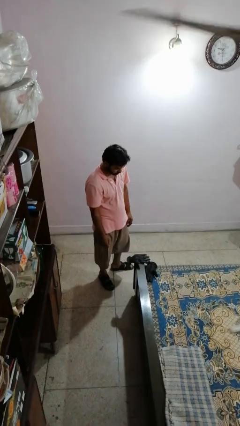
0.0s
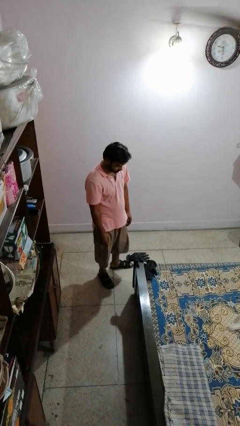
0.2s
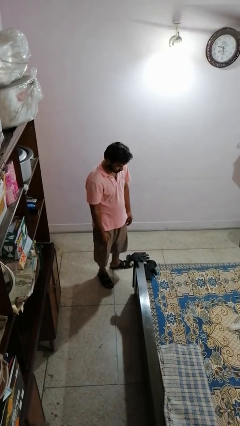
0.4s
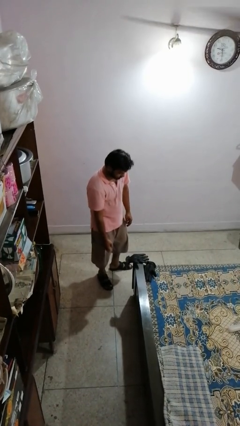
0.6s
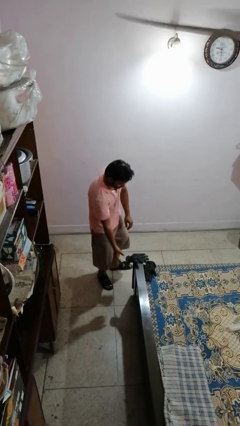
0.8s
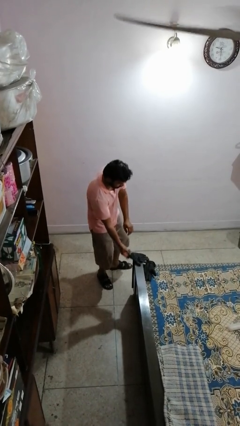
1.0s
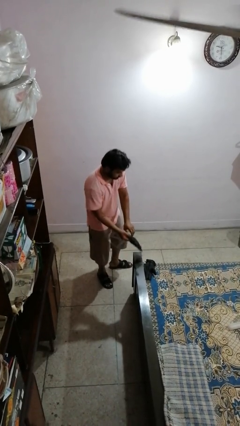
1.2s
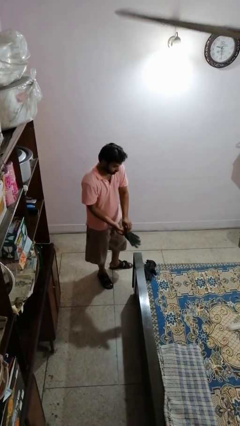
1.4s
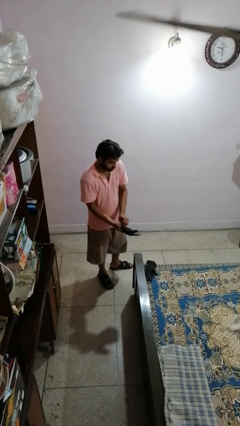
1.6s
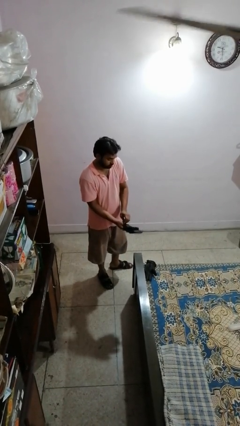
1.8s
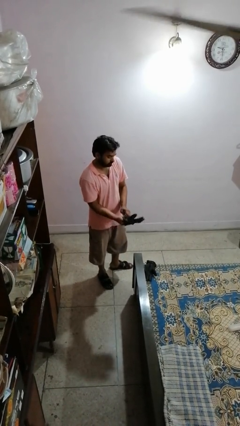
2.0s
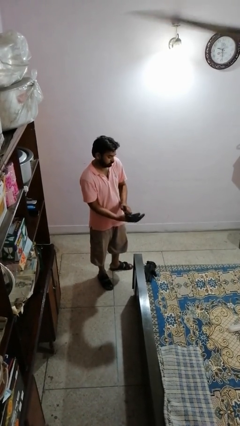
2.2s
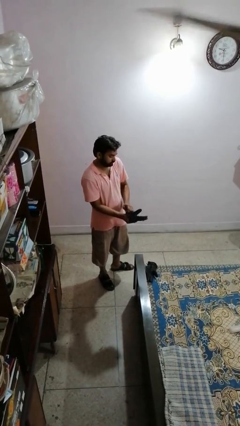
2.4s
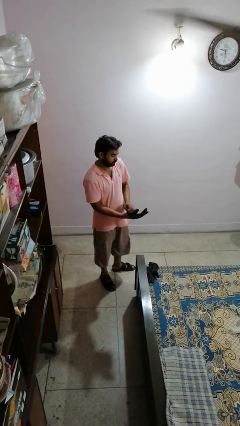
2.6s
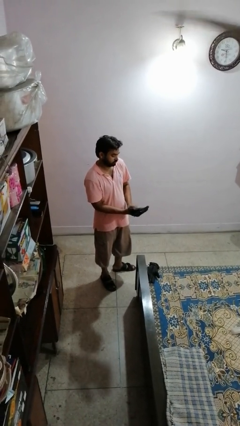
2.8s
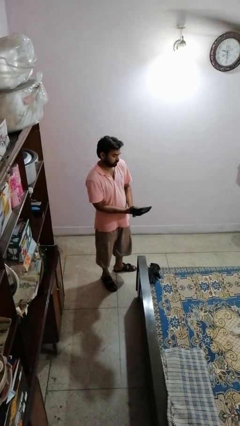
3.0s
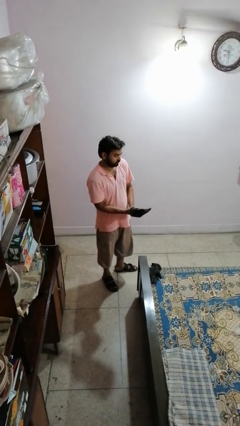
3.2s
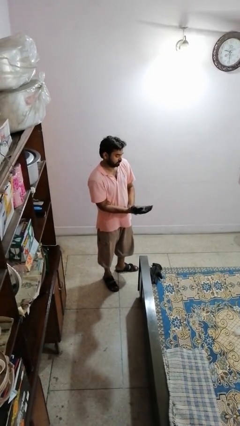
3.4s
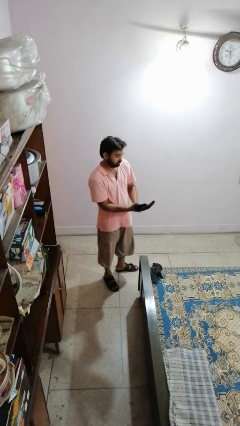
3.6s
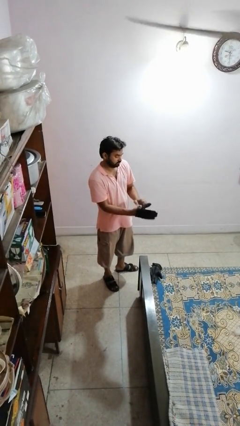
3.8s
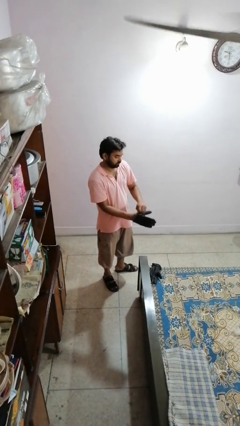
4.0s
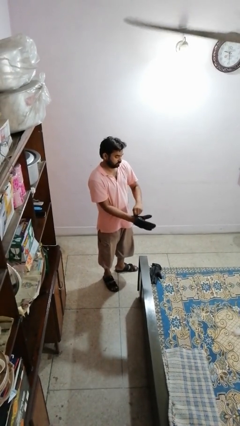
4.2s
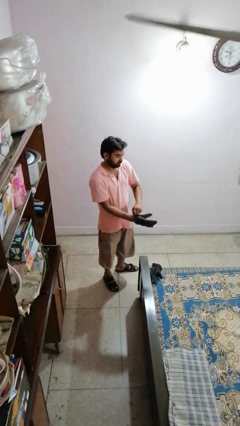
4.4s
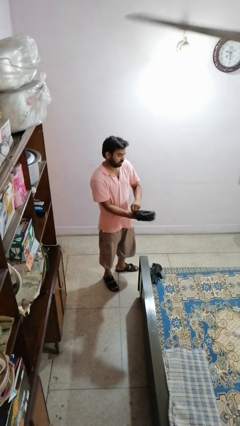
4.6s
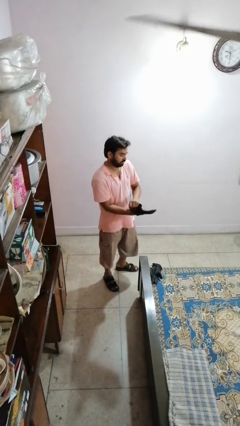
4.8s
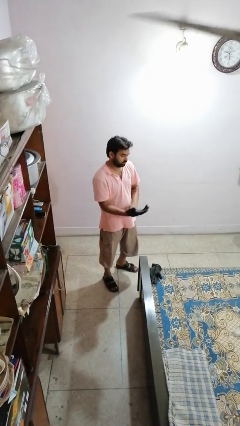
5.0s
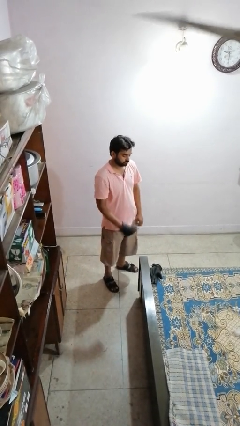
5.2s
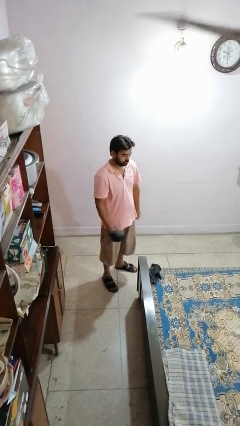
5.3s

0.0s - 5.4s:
person puts on gloves

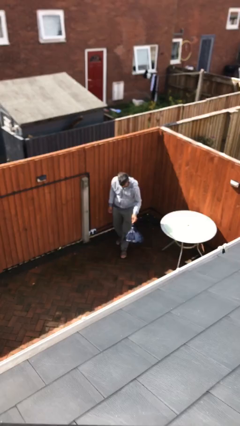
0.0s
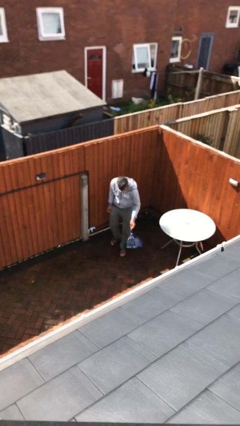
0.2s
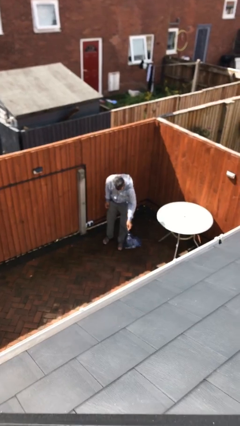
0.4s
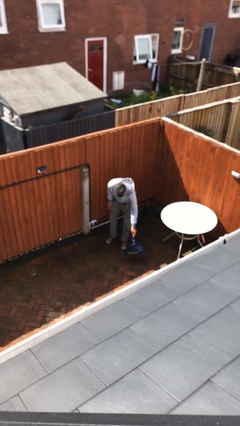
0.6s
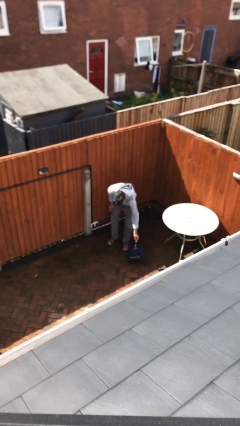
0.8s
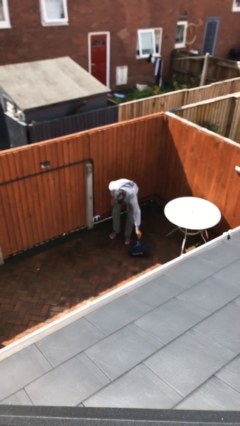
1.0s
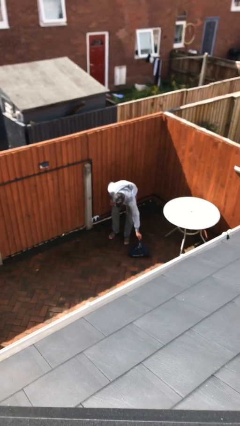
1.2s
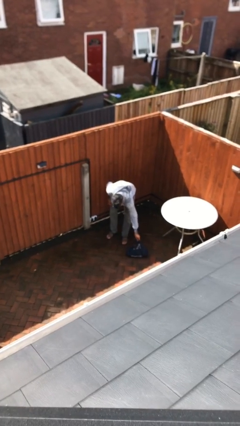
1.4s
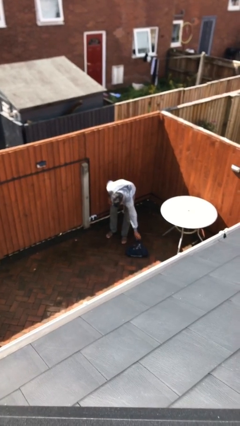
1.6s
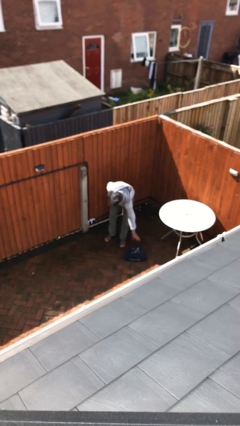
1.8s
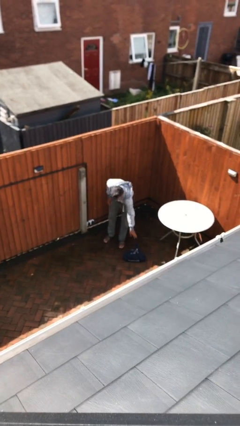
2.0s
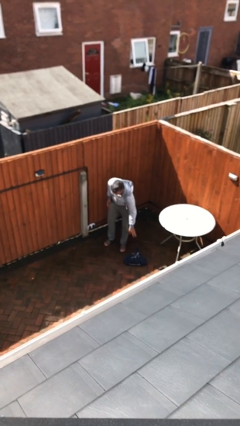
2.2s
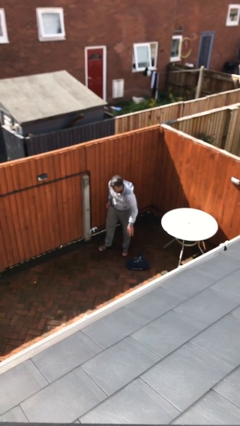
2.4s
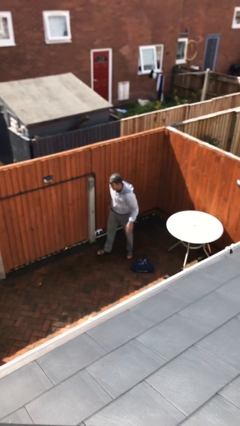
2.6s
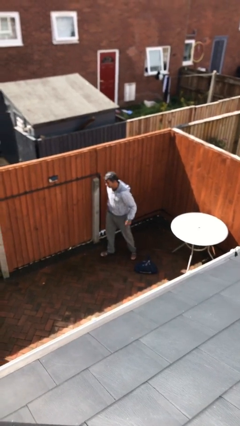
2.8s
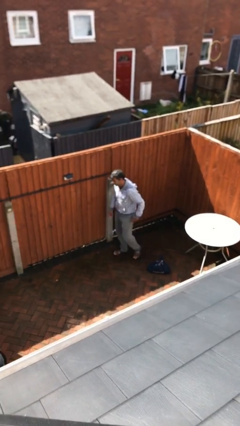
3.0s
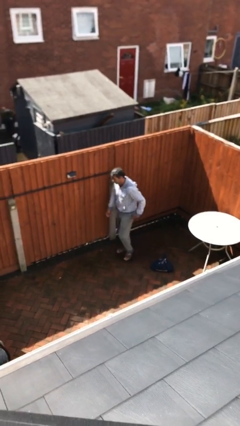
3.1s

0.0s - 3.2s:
person puts down object on floor

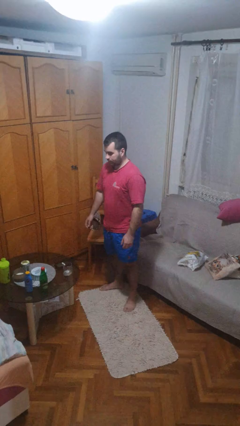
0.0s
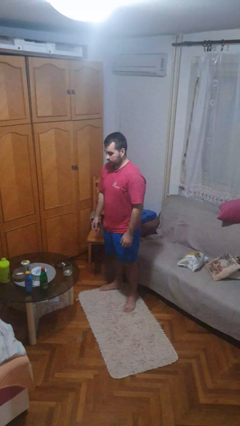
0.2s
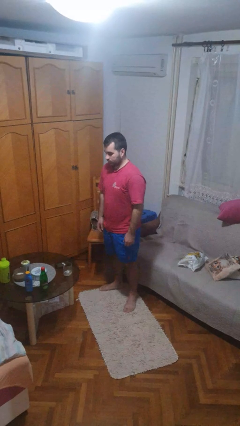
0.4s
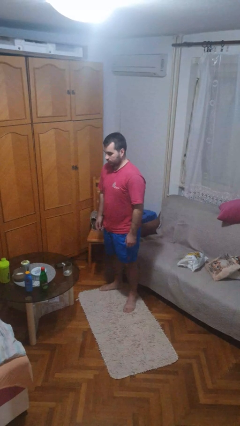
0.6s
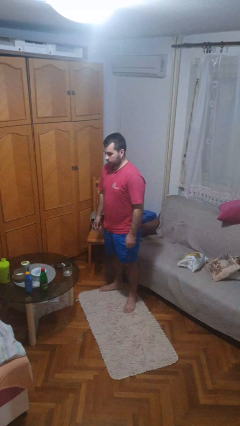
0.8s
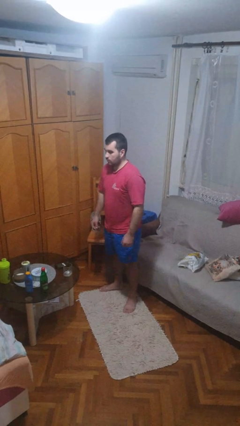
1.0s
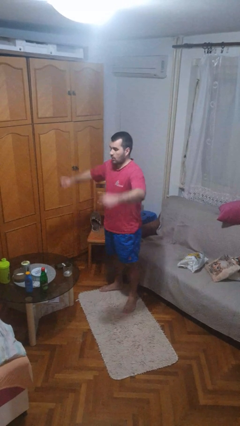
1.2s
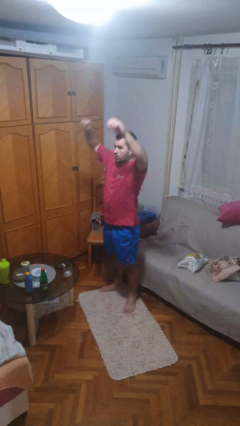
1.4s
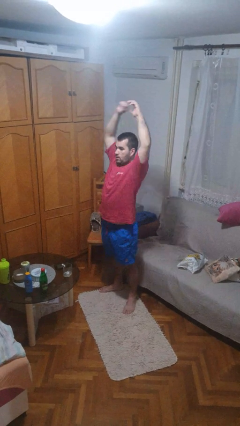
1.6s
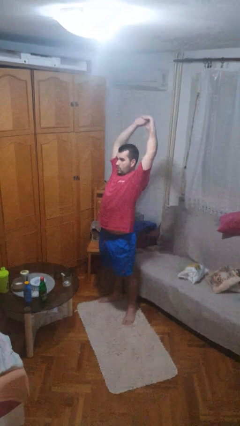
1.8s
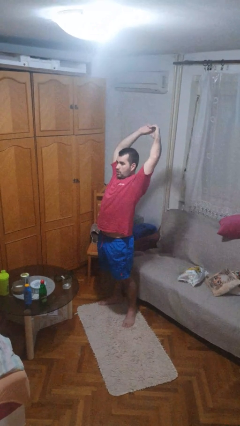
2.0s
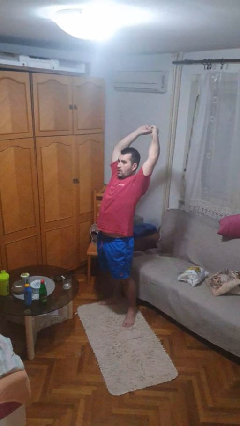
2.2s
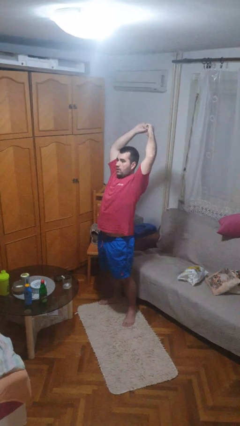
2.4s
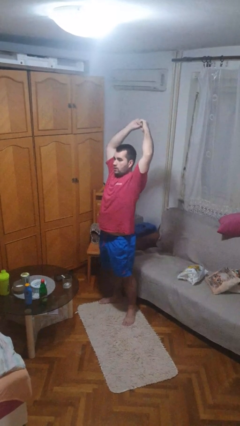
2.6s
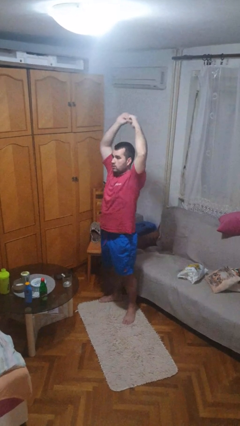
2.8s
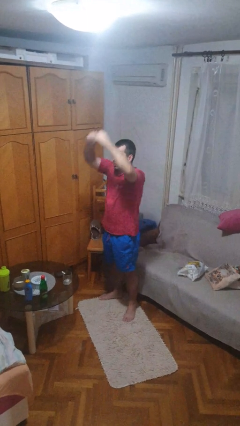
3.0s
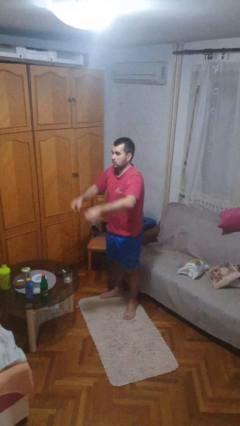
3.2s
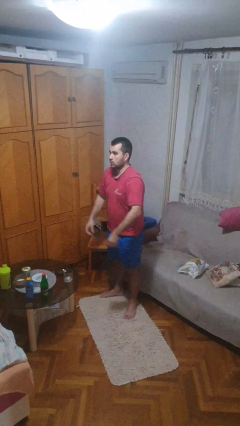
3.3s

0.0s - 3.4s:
person stretches arms over head

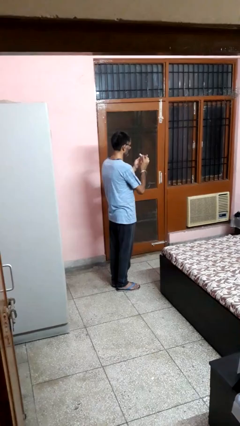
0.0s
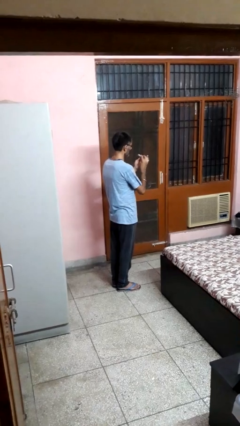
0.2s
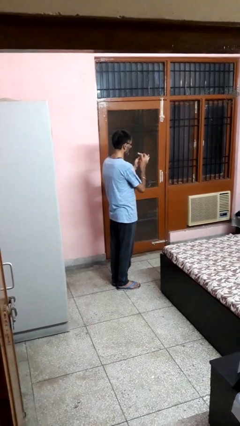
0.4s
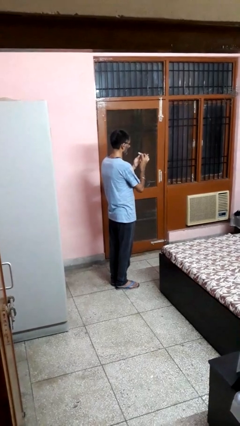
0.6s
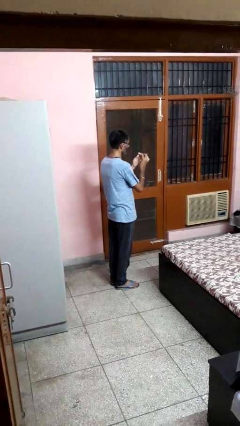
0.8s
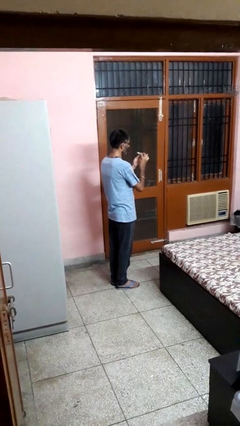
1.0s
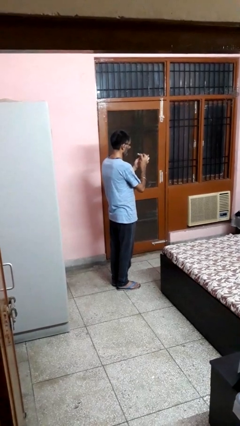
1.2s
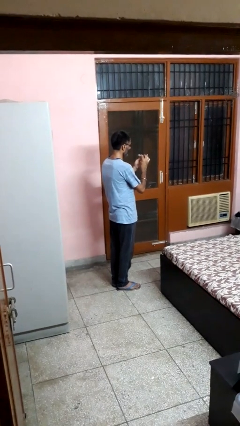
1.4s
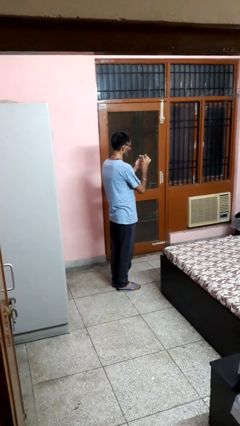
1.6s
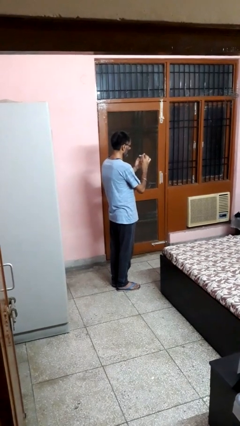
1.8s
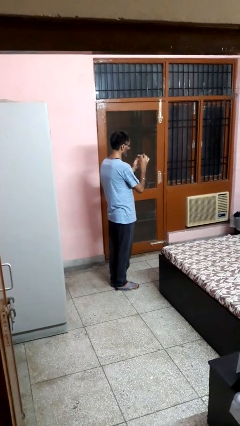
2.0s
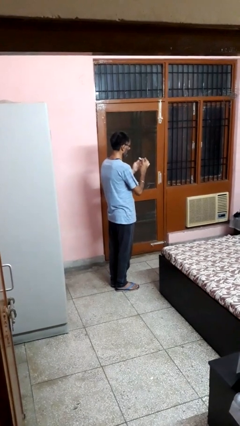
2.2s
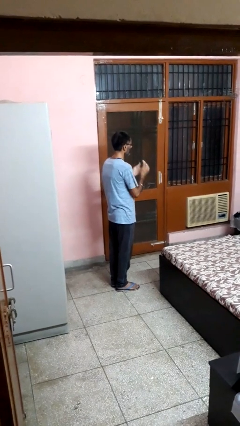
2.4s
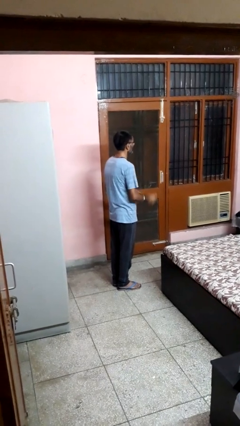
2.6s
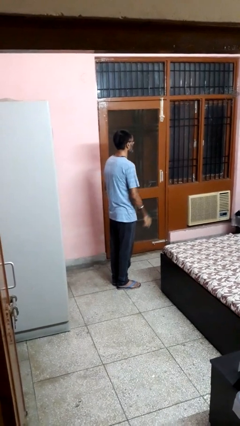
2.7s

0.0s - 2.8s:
person files fingernails

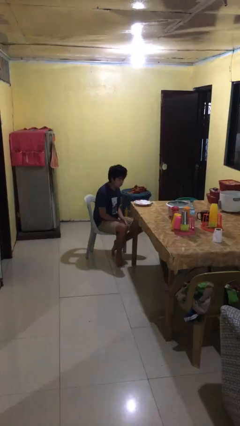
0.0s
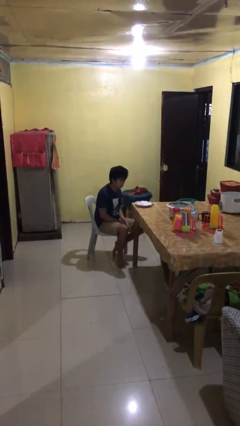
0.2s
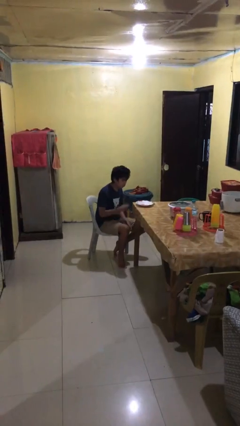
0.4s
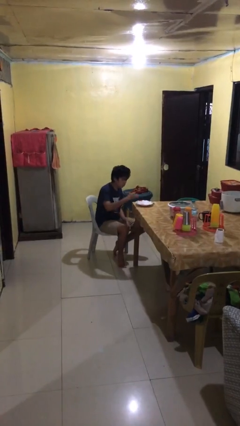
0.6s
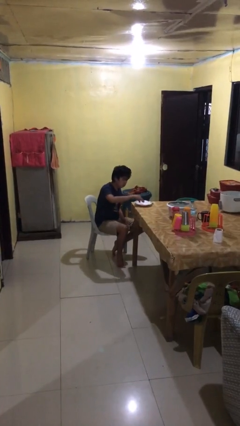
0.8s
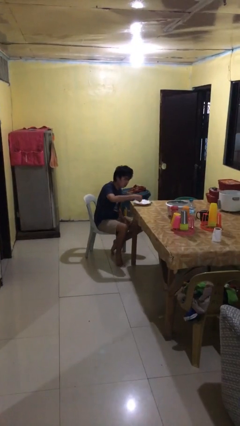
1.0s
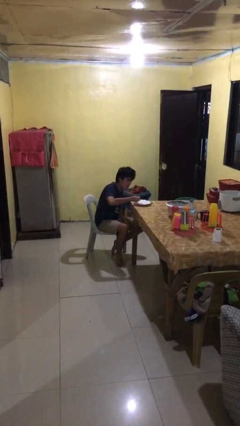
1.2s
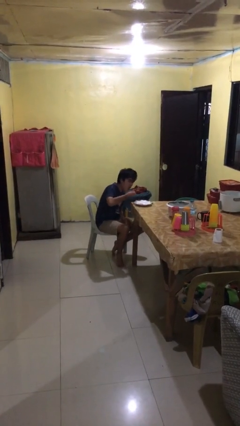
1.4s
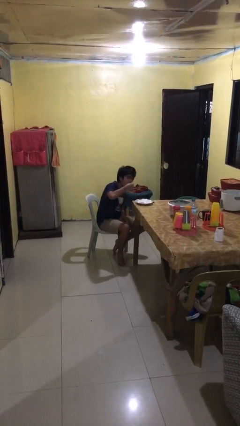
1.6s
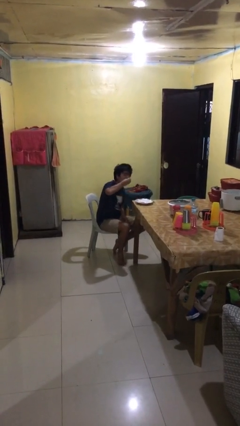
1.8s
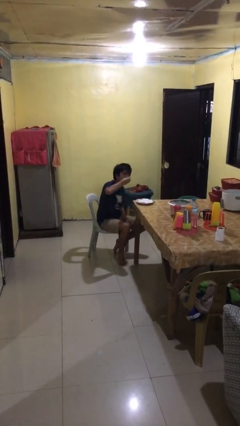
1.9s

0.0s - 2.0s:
person eats with hands

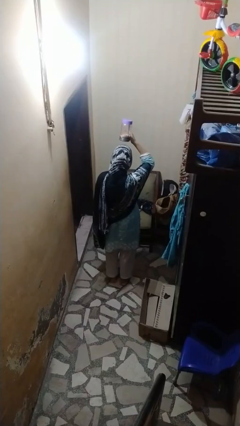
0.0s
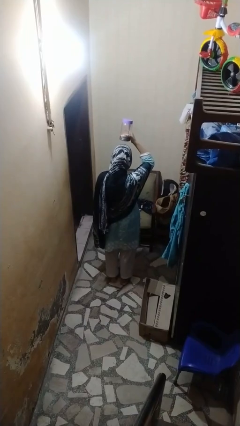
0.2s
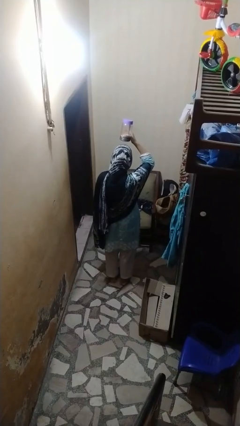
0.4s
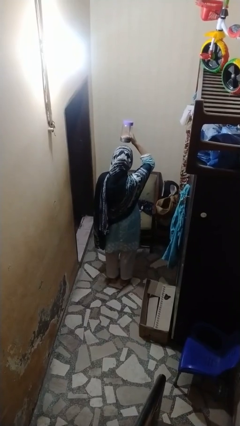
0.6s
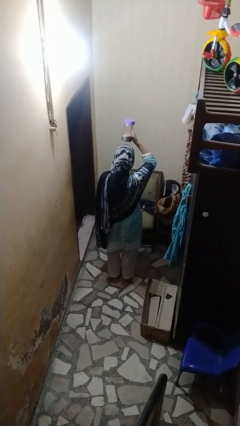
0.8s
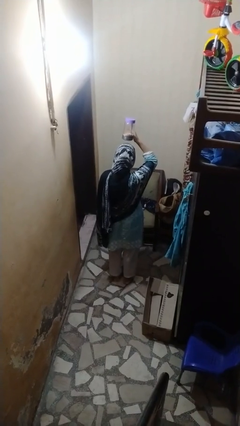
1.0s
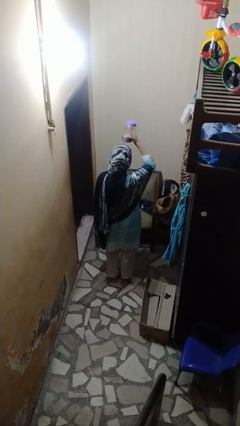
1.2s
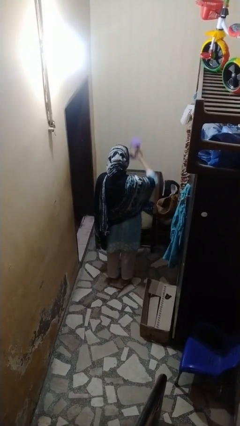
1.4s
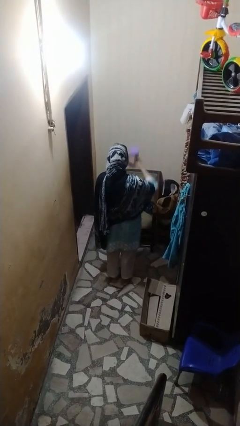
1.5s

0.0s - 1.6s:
person holds object above head
